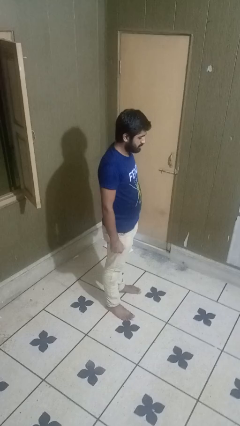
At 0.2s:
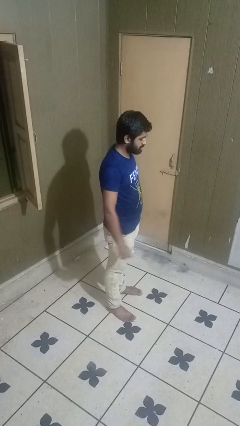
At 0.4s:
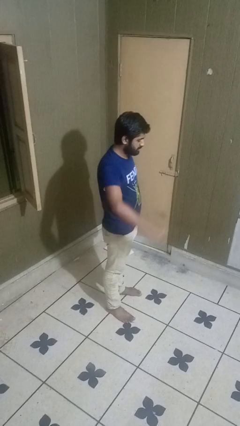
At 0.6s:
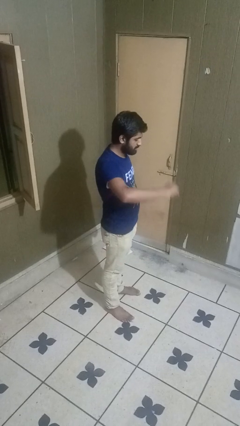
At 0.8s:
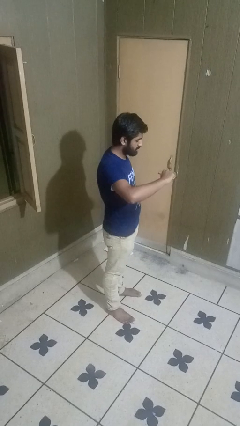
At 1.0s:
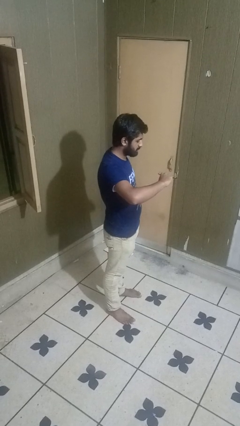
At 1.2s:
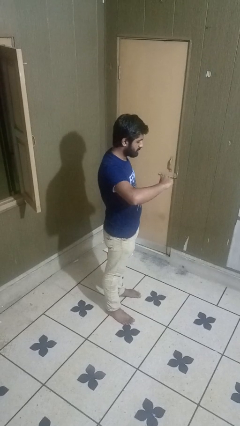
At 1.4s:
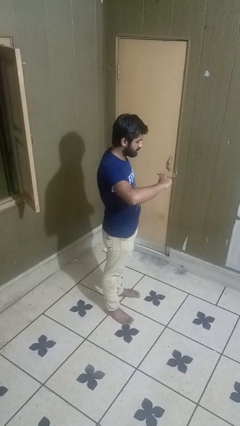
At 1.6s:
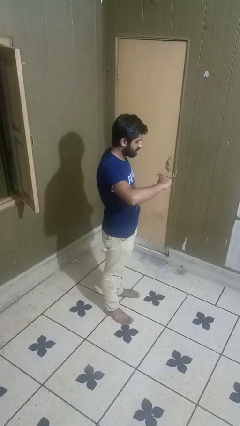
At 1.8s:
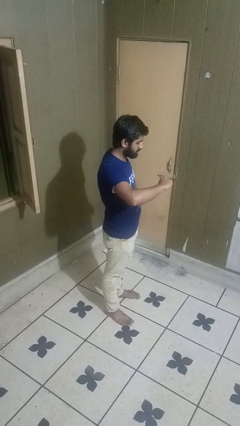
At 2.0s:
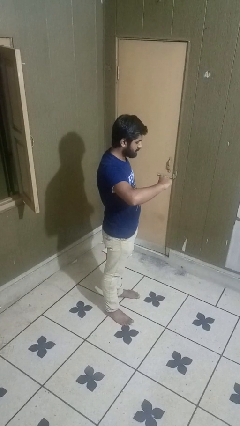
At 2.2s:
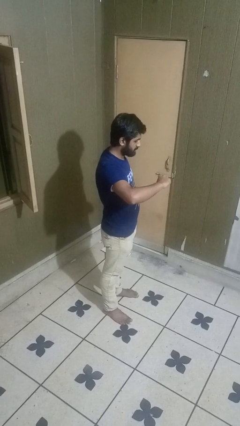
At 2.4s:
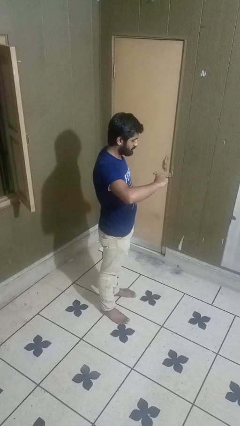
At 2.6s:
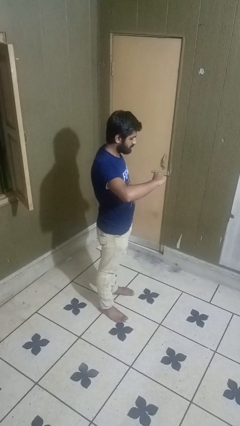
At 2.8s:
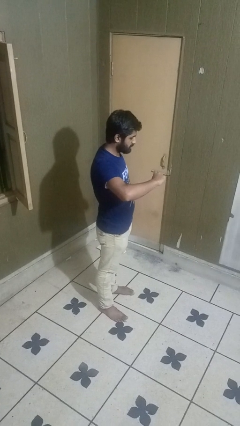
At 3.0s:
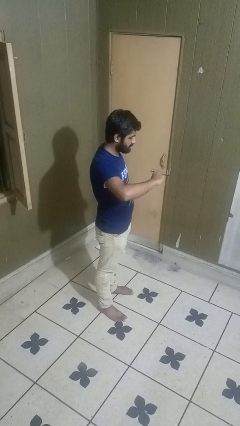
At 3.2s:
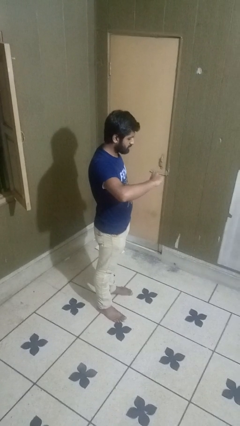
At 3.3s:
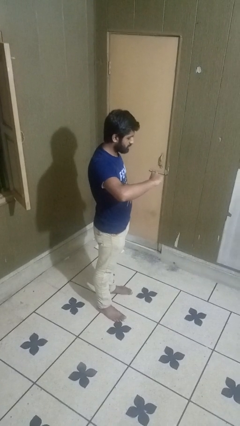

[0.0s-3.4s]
person karate chop

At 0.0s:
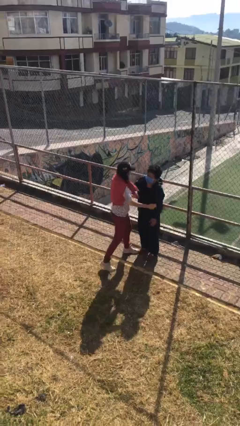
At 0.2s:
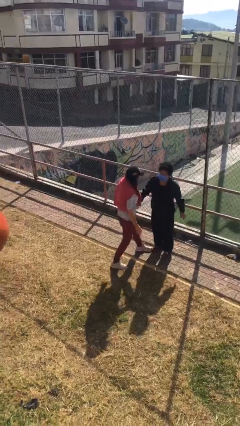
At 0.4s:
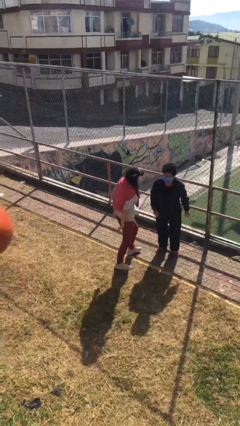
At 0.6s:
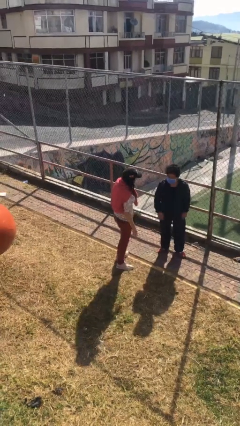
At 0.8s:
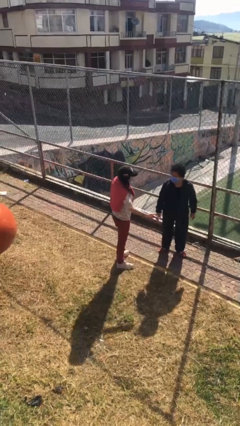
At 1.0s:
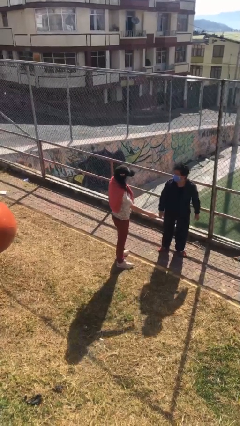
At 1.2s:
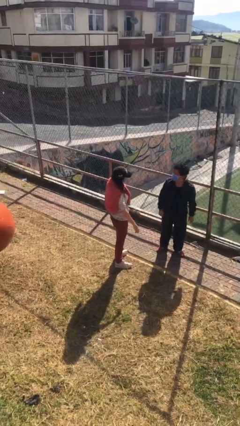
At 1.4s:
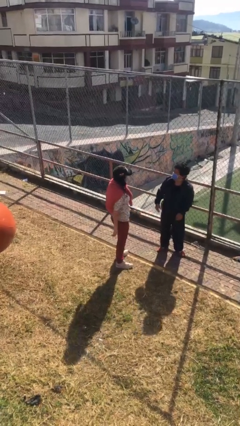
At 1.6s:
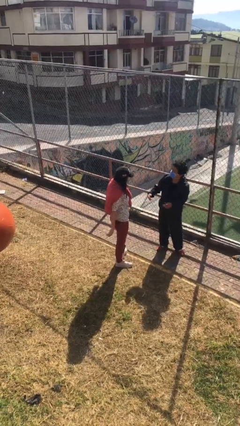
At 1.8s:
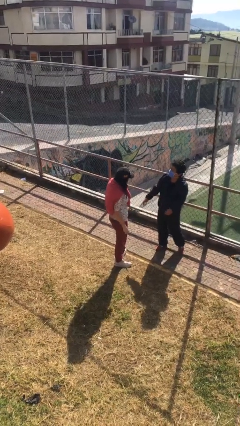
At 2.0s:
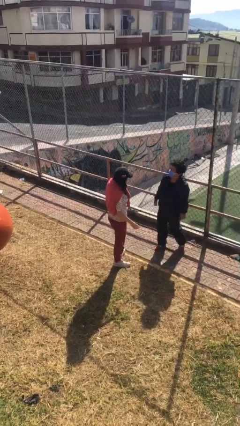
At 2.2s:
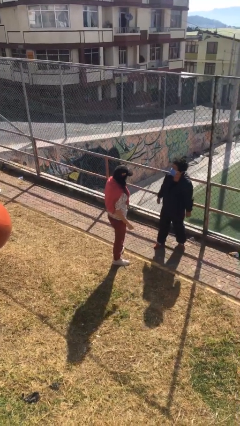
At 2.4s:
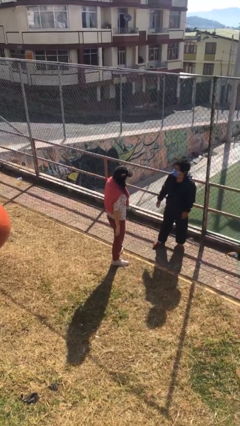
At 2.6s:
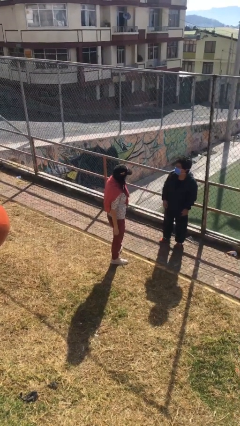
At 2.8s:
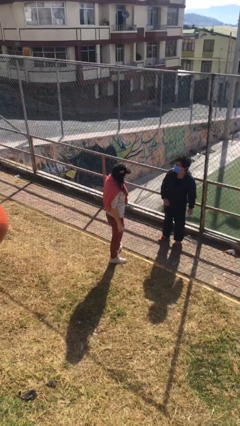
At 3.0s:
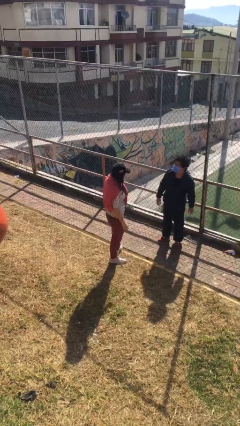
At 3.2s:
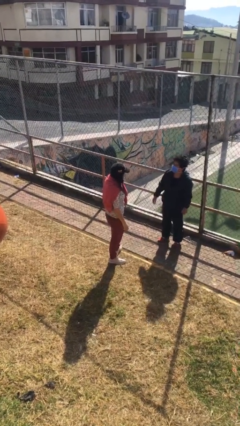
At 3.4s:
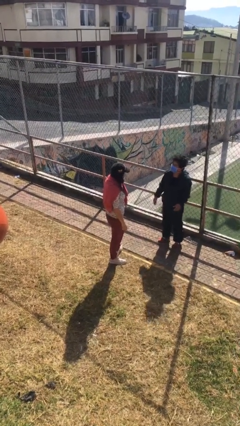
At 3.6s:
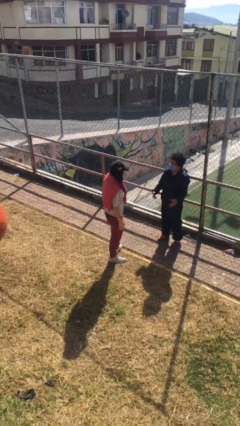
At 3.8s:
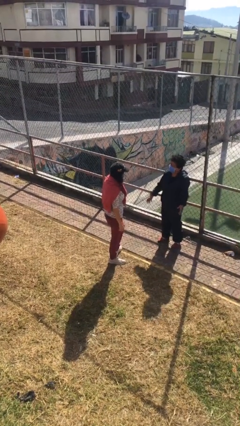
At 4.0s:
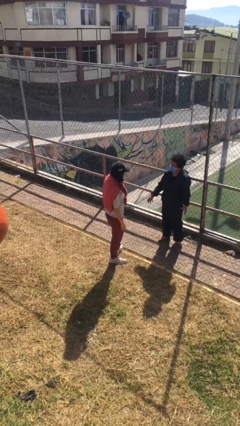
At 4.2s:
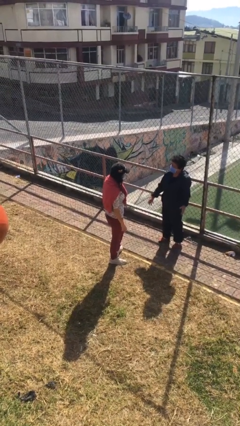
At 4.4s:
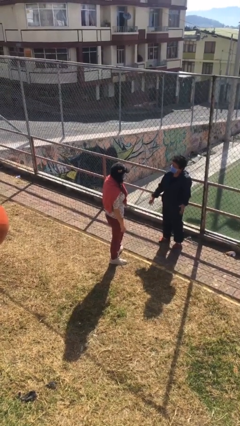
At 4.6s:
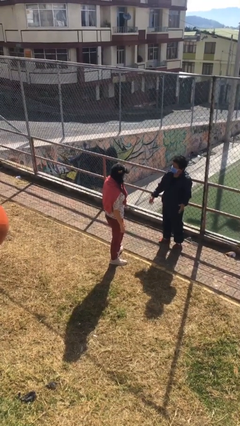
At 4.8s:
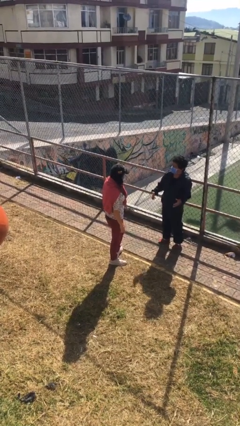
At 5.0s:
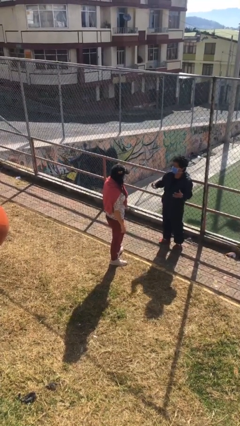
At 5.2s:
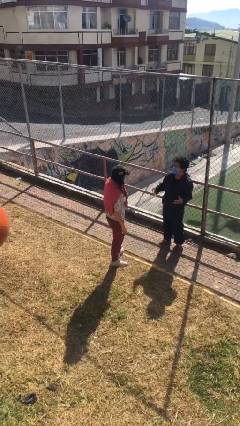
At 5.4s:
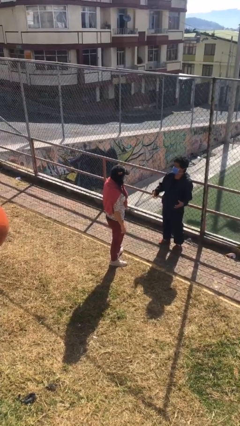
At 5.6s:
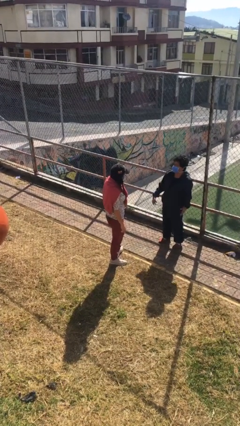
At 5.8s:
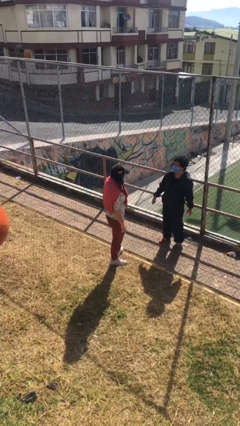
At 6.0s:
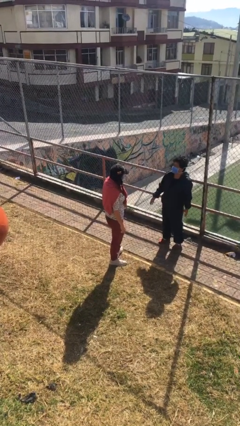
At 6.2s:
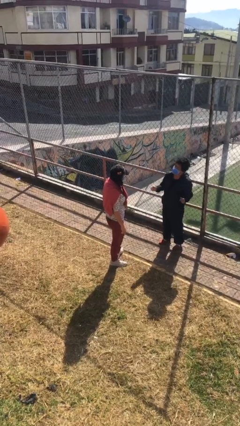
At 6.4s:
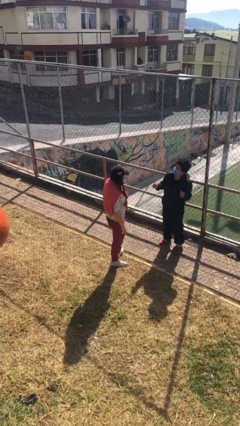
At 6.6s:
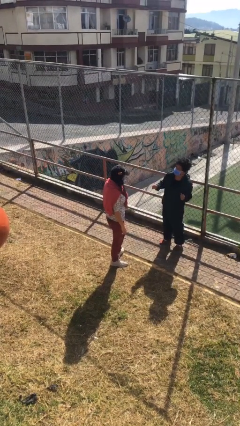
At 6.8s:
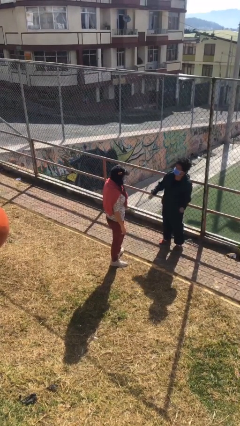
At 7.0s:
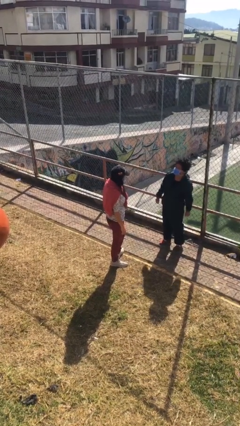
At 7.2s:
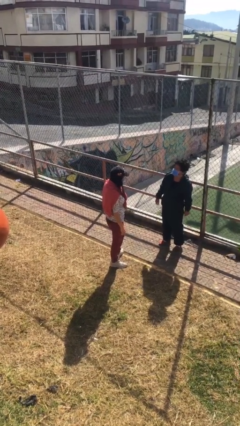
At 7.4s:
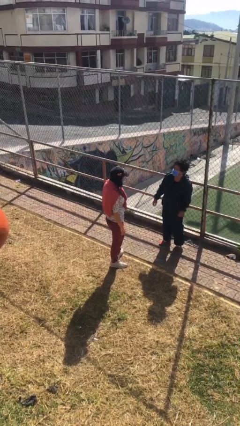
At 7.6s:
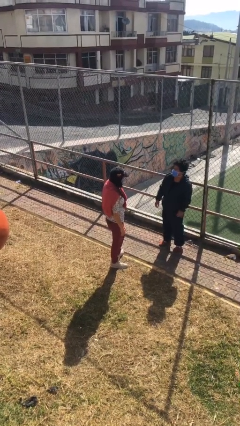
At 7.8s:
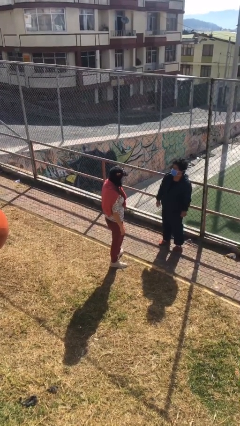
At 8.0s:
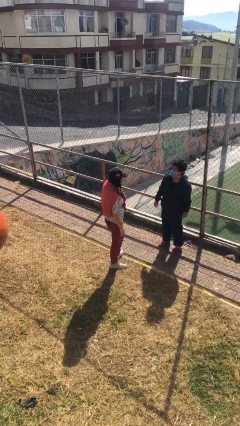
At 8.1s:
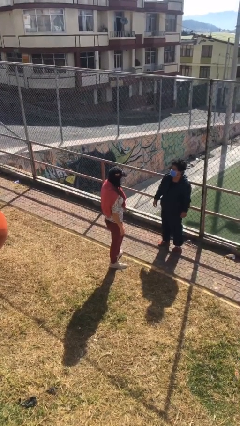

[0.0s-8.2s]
person talks to person

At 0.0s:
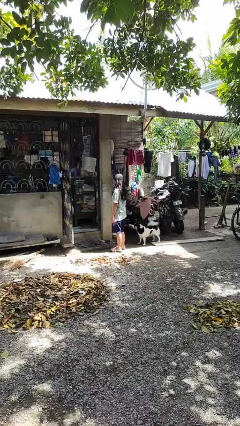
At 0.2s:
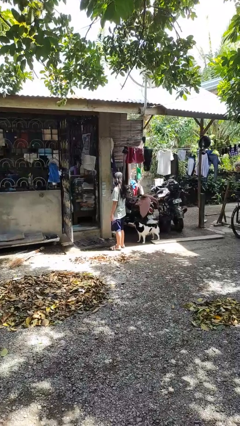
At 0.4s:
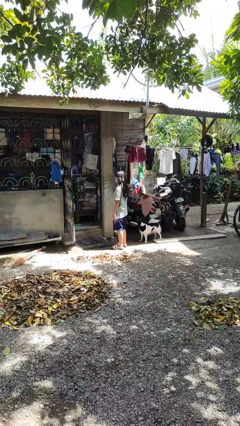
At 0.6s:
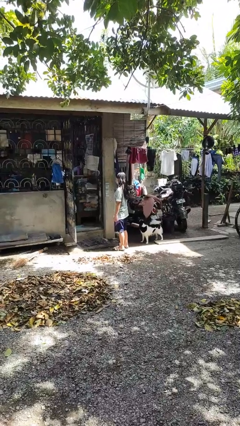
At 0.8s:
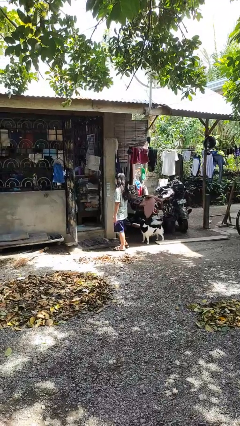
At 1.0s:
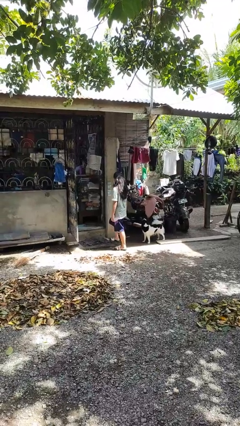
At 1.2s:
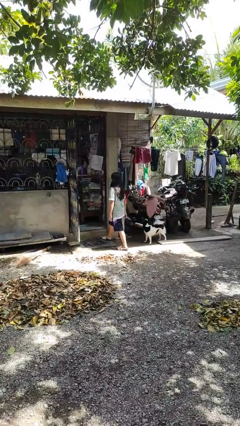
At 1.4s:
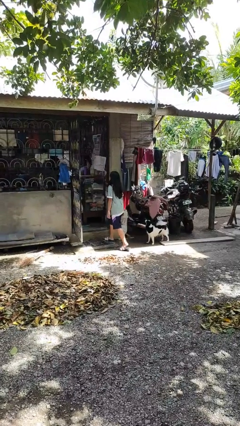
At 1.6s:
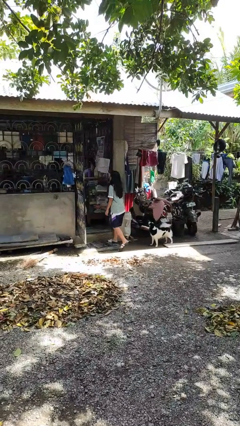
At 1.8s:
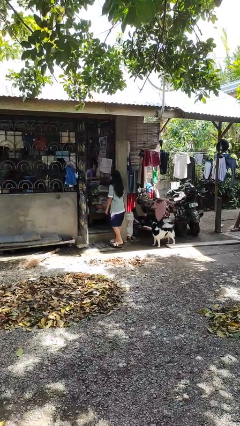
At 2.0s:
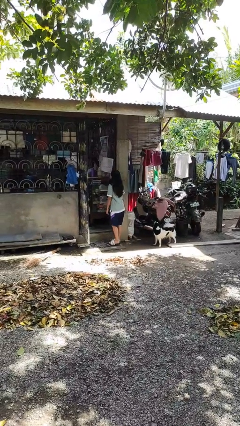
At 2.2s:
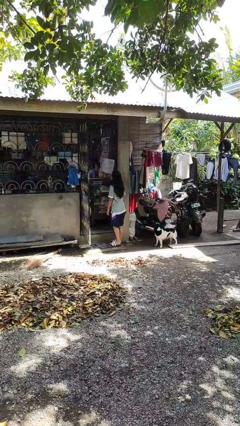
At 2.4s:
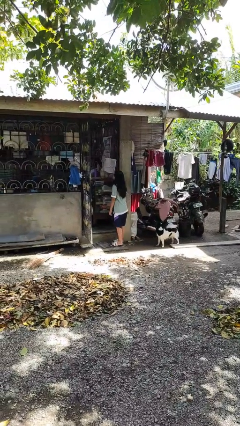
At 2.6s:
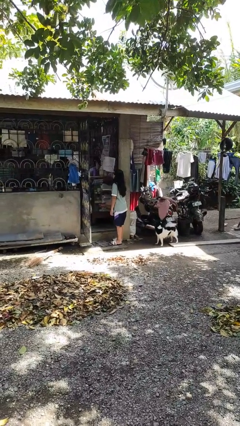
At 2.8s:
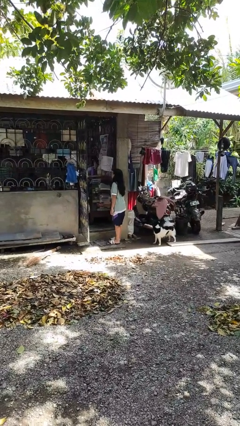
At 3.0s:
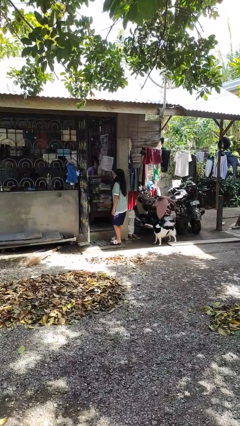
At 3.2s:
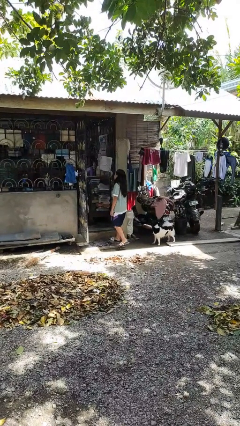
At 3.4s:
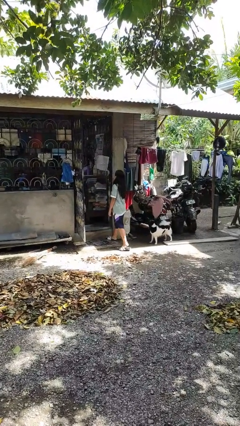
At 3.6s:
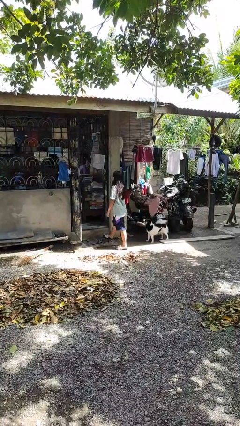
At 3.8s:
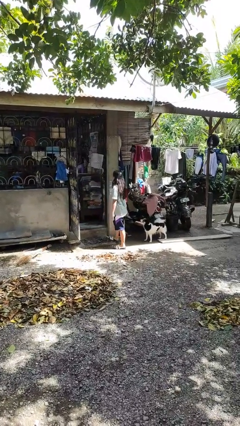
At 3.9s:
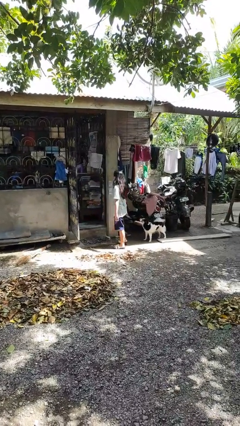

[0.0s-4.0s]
person bumps into wall

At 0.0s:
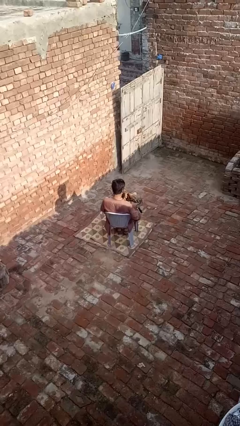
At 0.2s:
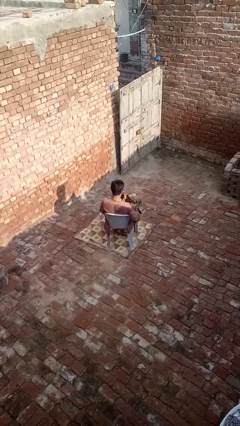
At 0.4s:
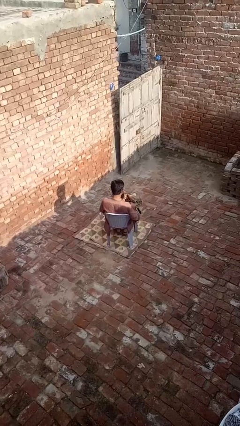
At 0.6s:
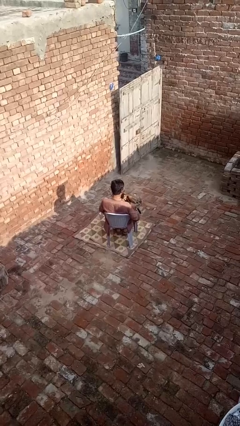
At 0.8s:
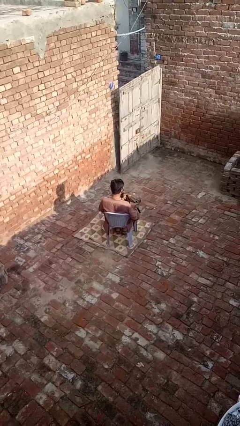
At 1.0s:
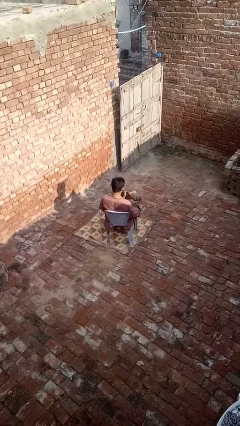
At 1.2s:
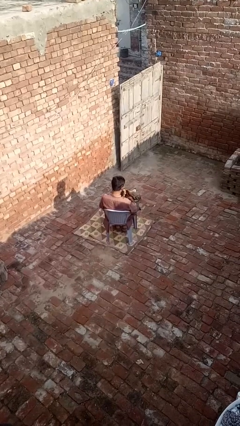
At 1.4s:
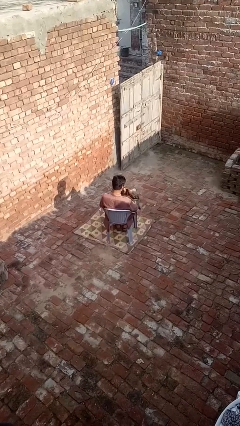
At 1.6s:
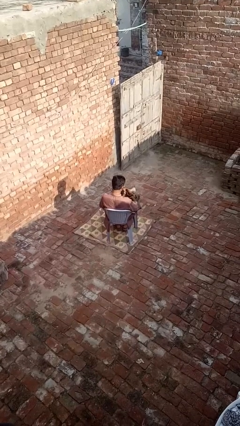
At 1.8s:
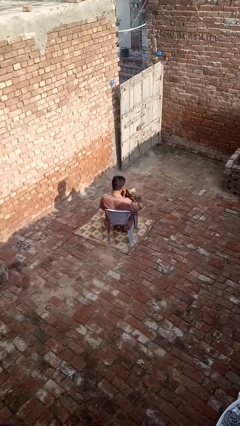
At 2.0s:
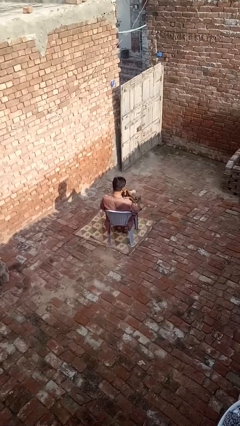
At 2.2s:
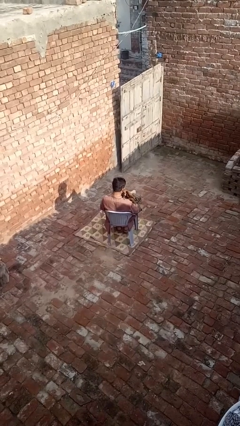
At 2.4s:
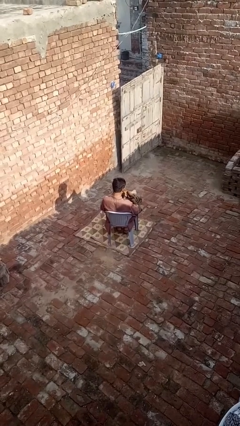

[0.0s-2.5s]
person searches in purse

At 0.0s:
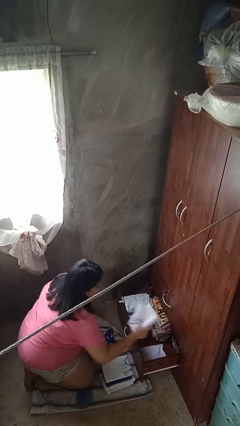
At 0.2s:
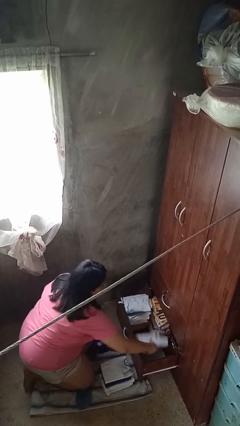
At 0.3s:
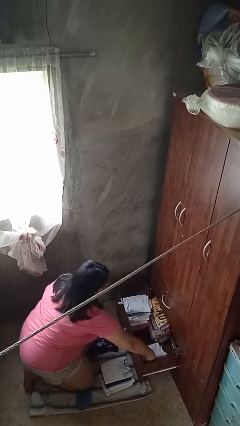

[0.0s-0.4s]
person puts clothes into dresser
